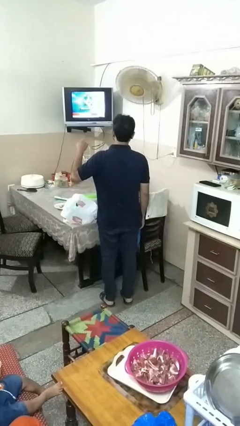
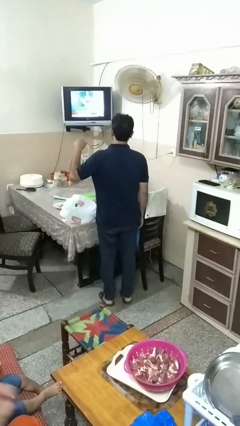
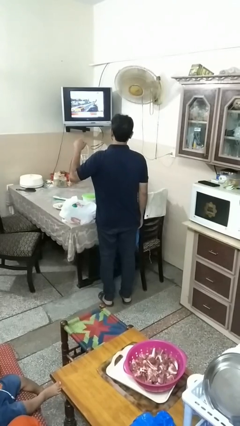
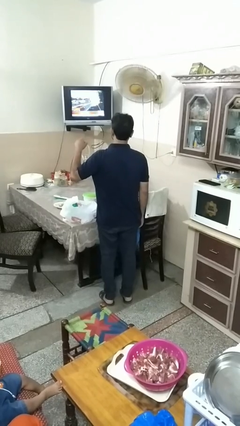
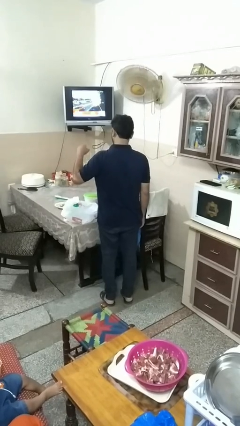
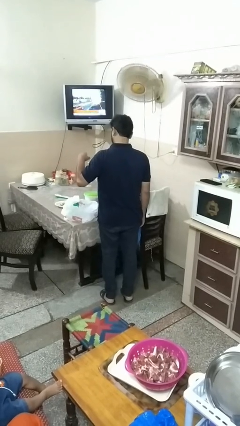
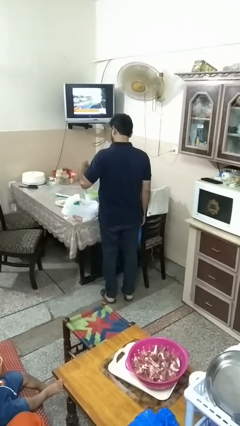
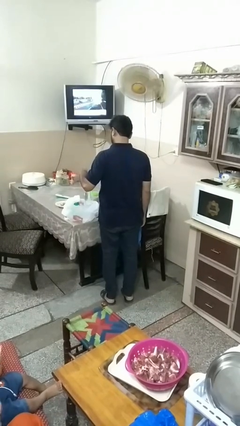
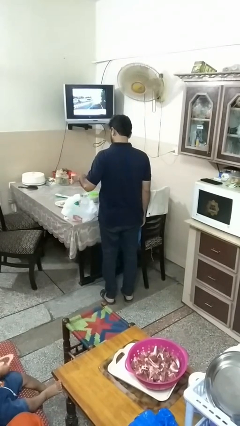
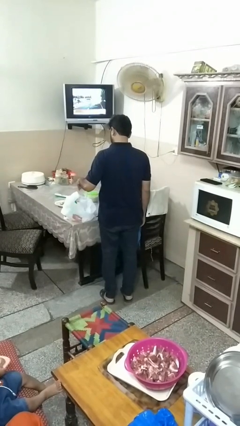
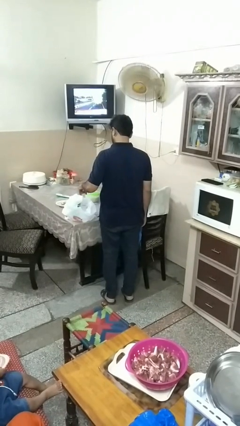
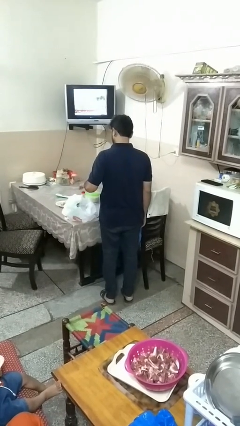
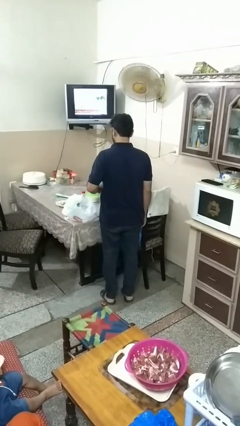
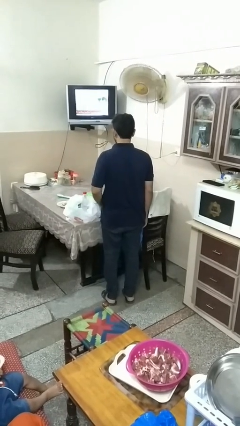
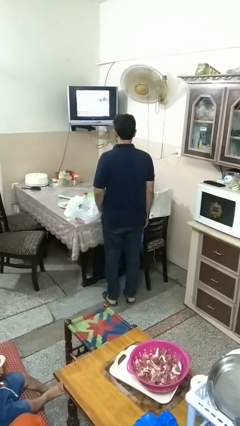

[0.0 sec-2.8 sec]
person puts object into bag

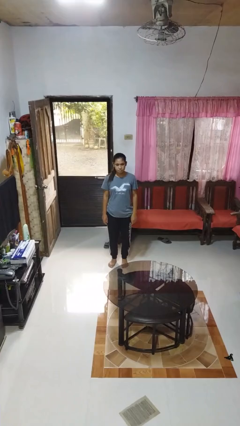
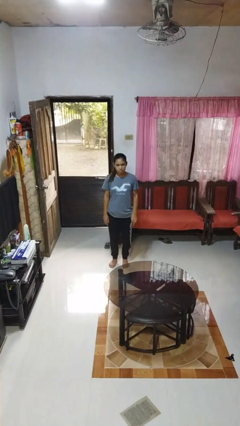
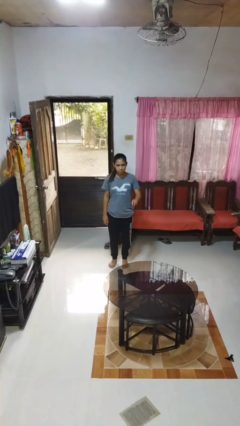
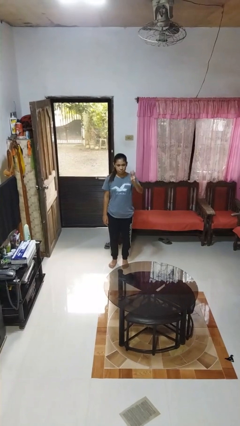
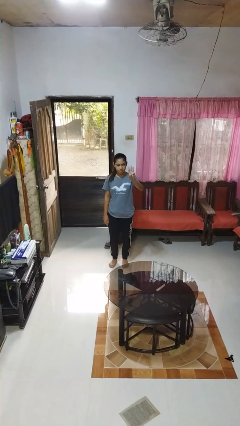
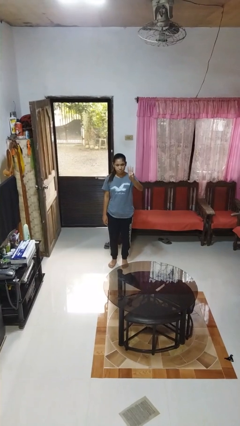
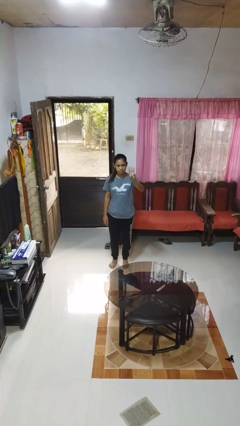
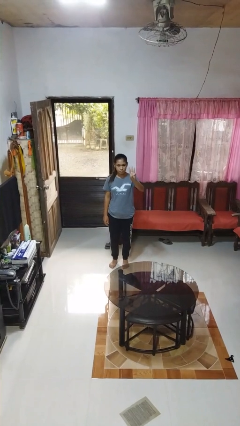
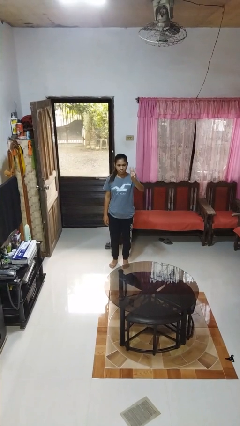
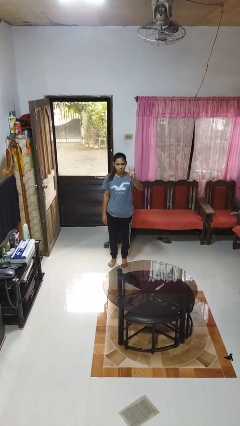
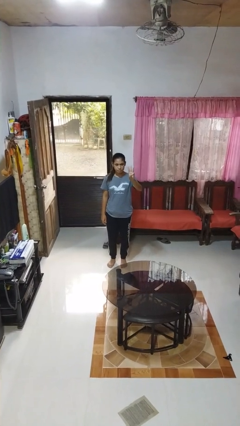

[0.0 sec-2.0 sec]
person gestures number three

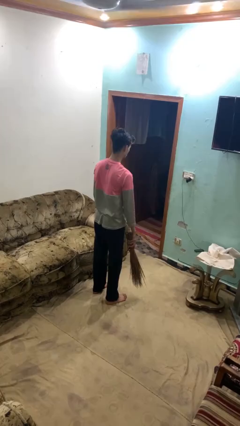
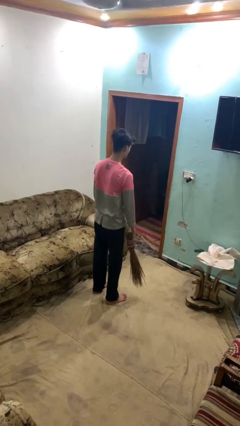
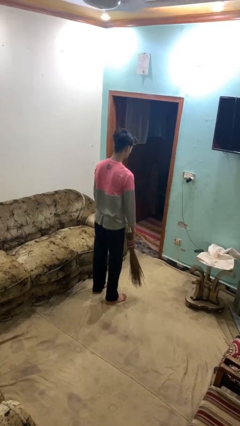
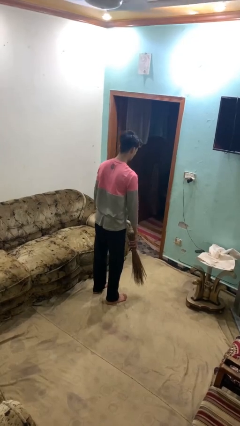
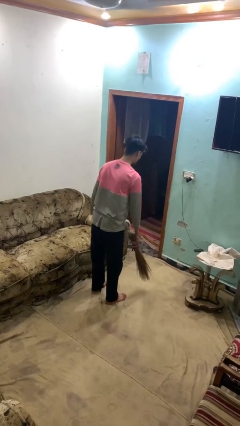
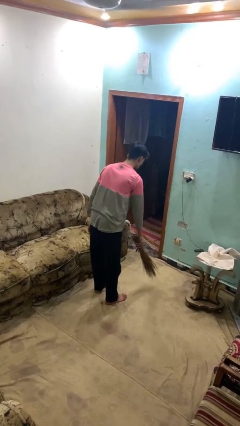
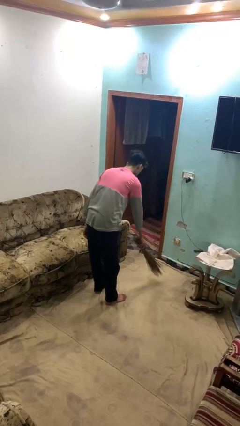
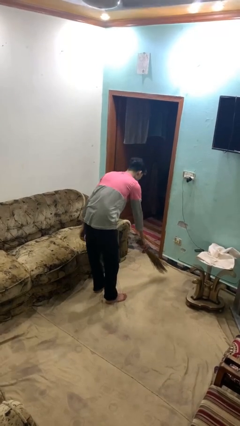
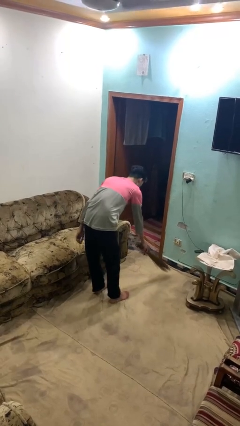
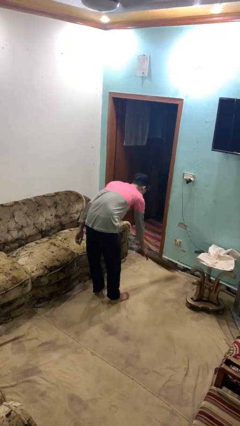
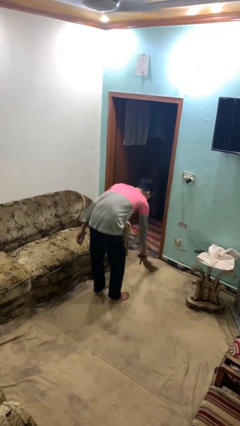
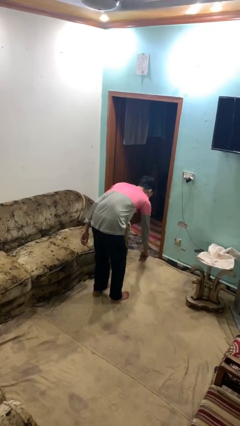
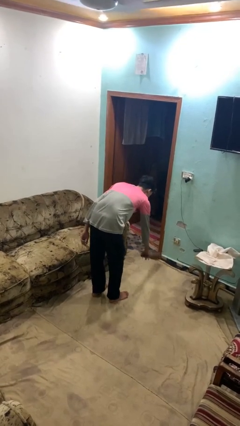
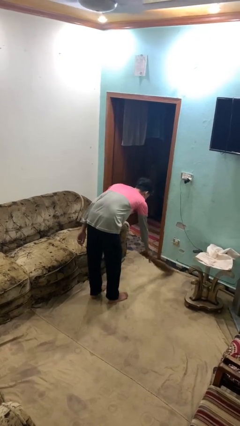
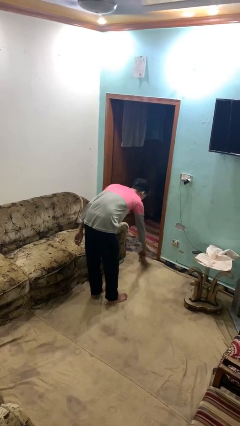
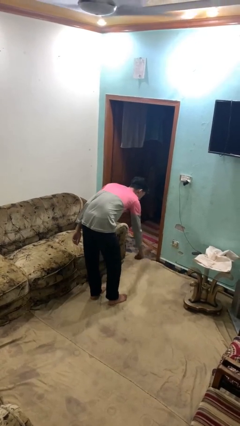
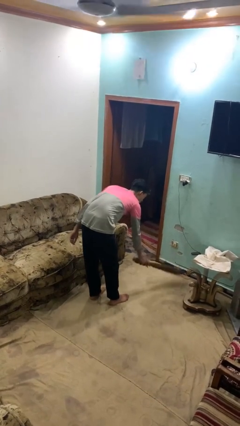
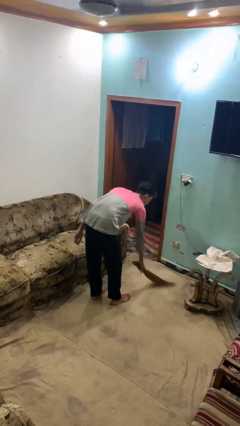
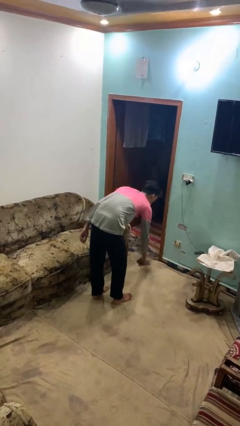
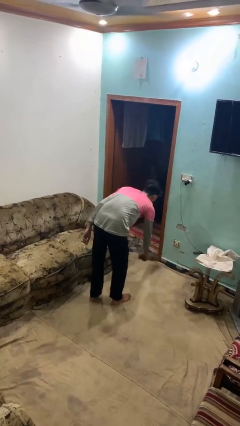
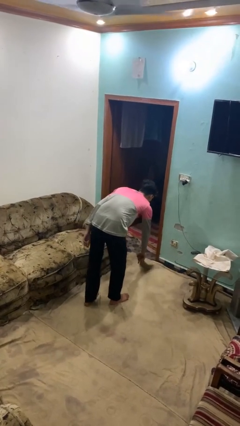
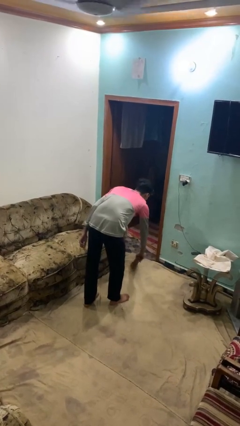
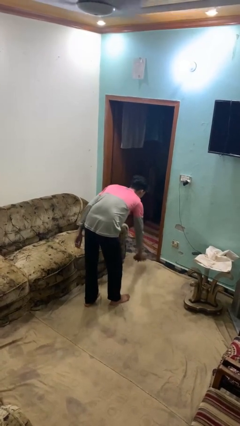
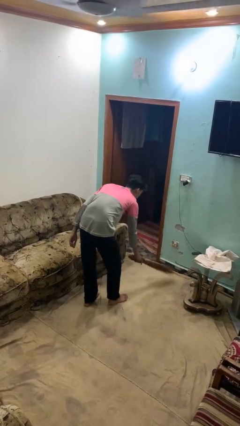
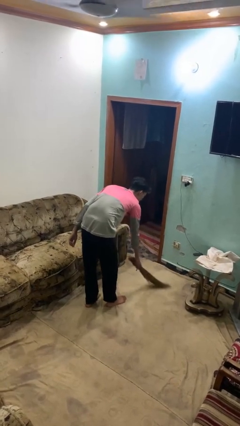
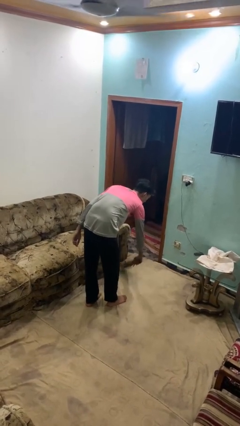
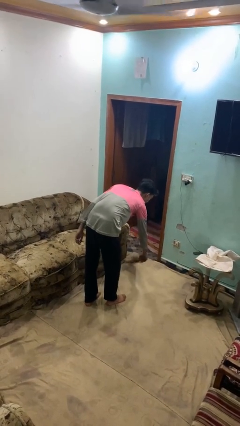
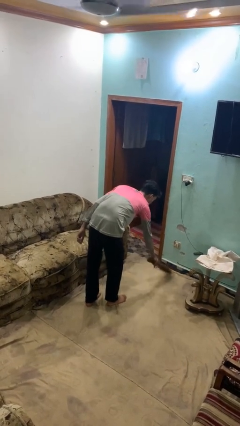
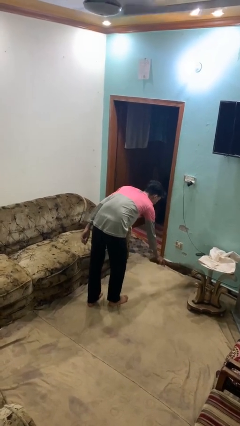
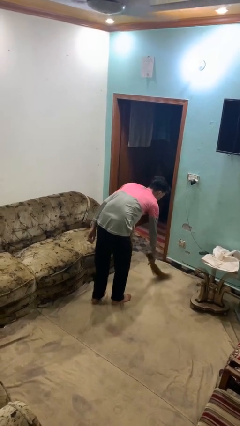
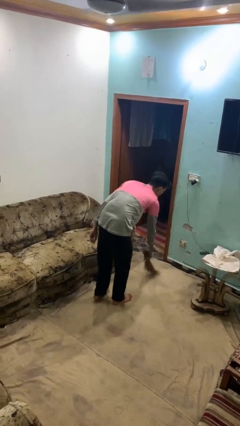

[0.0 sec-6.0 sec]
person sweeps floor

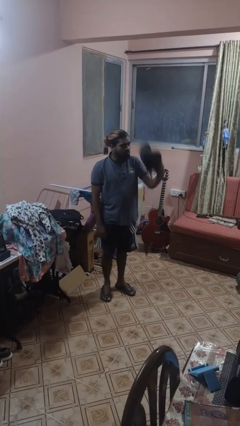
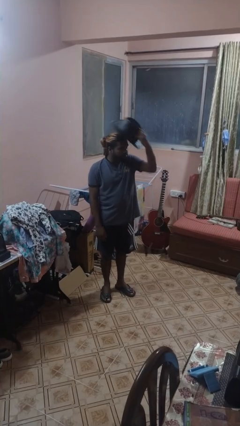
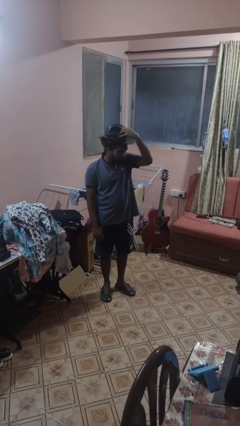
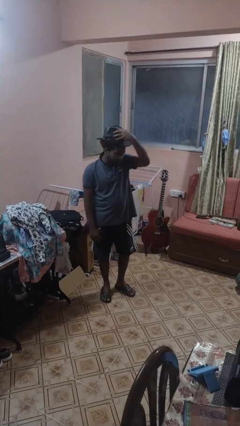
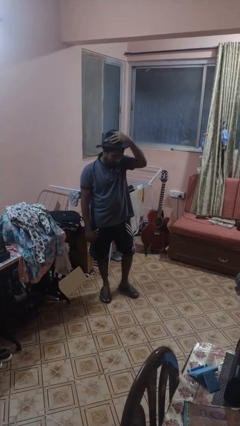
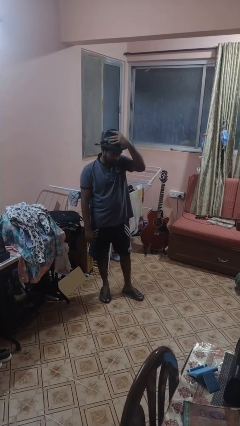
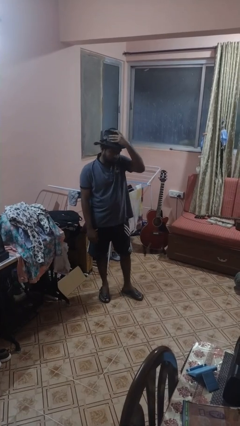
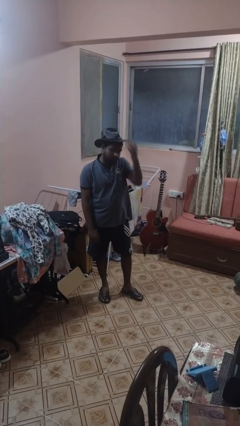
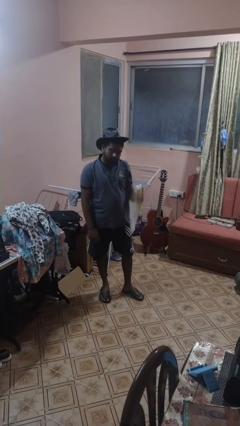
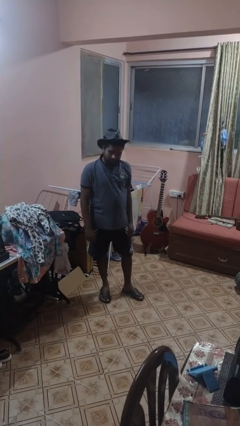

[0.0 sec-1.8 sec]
person puts on hat

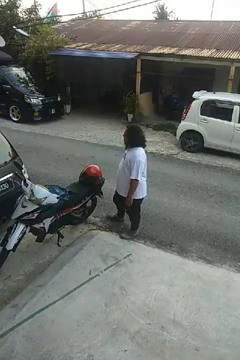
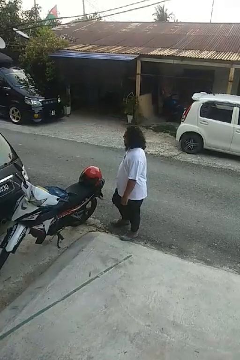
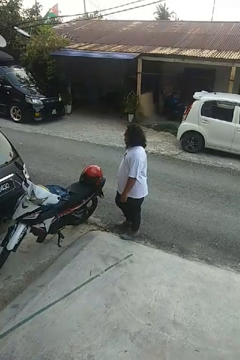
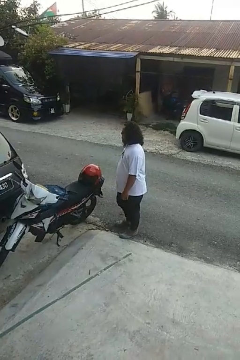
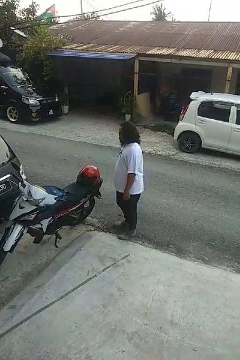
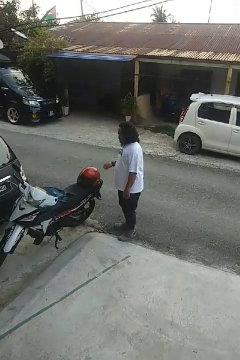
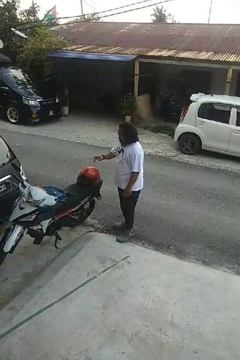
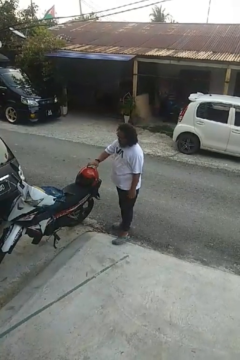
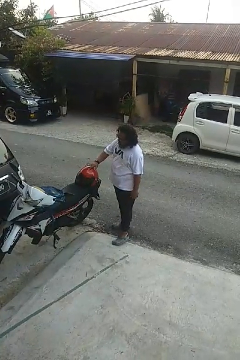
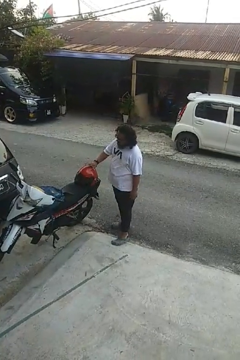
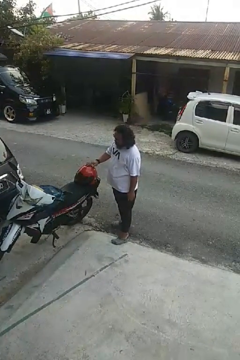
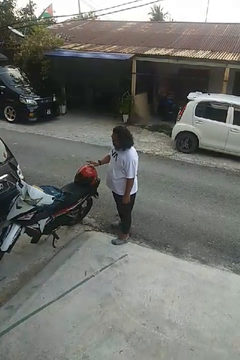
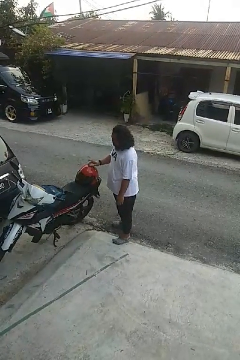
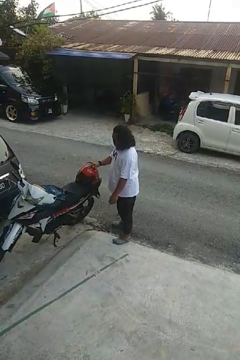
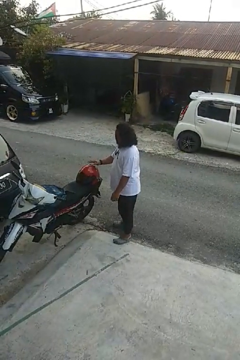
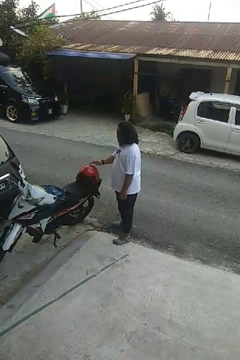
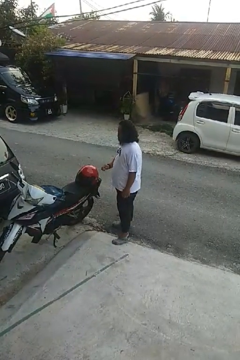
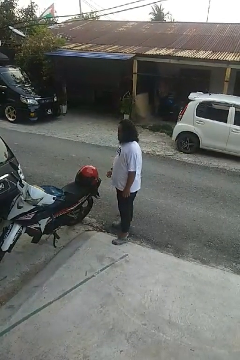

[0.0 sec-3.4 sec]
person taps object with finger

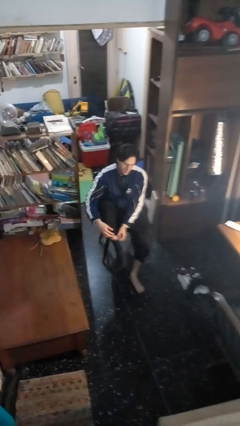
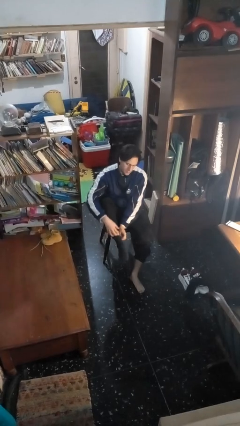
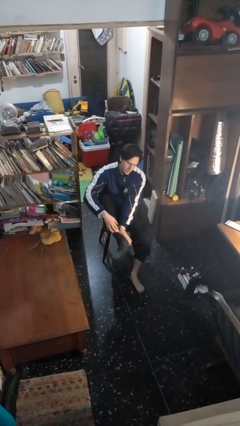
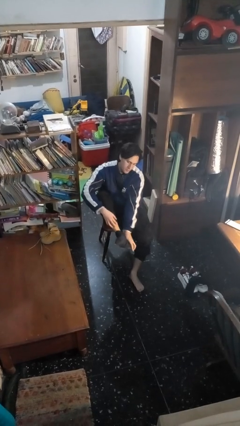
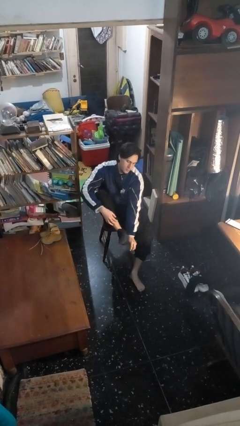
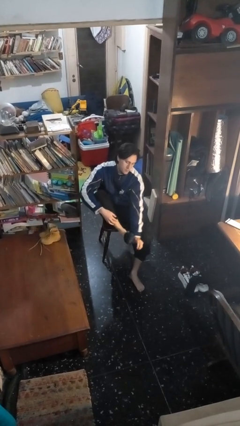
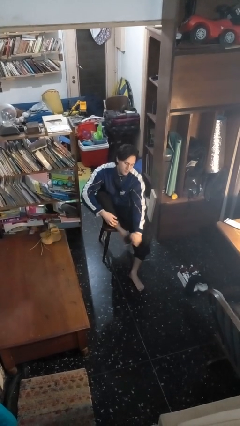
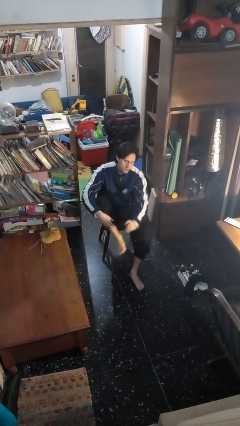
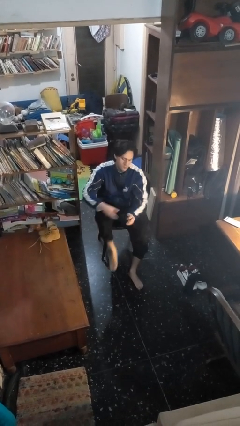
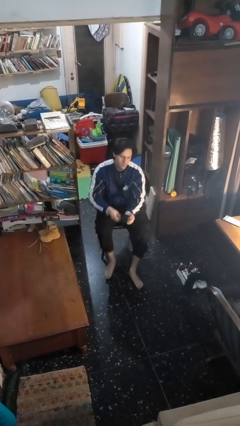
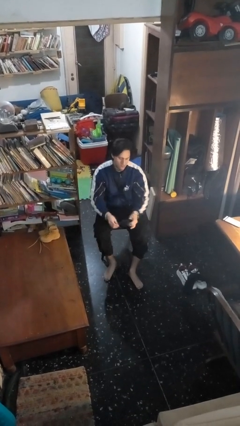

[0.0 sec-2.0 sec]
person takes off socks

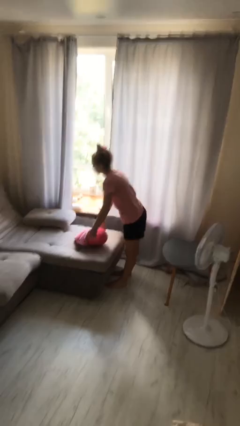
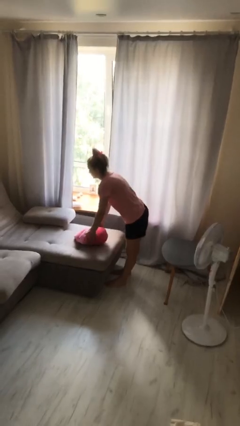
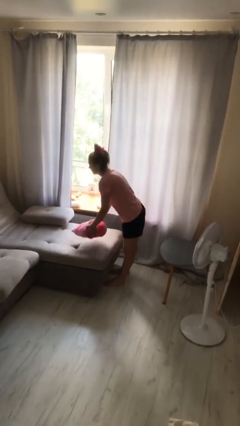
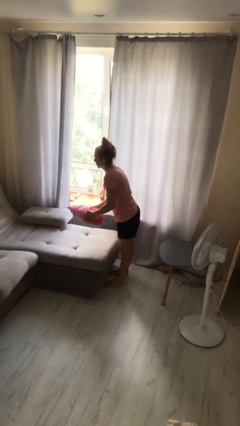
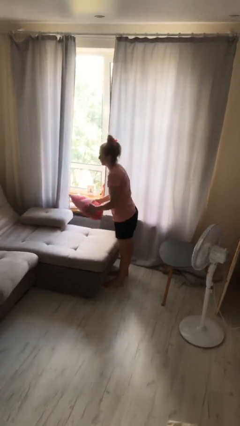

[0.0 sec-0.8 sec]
person picks up object from couch
